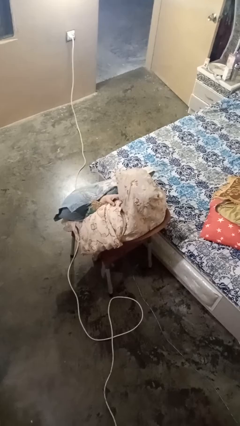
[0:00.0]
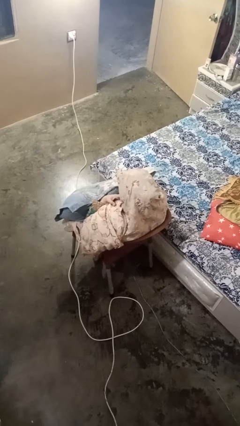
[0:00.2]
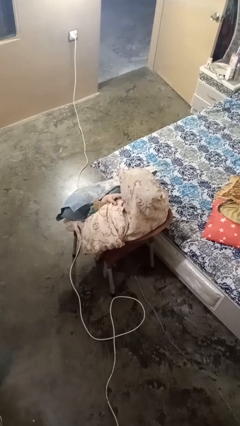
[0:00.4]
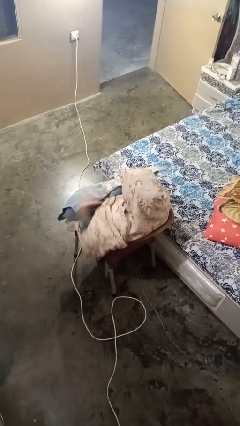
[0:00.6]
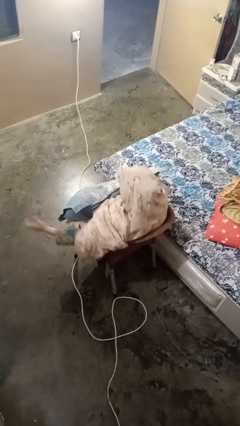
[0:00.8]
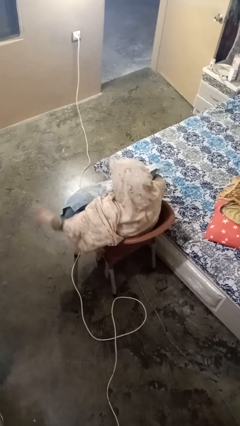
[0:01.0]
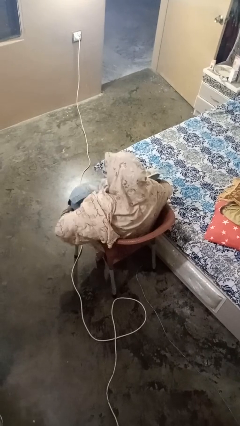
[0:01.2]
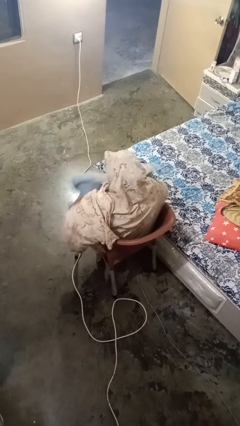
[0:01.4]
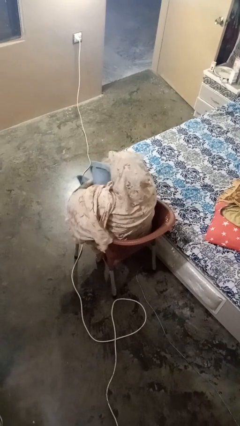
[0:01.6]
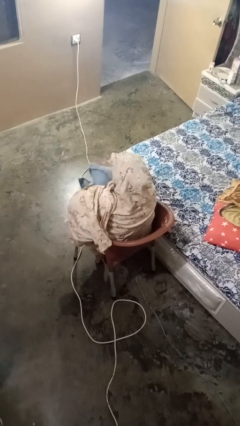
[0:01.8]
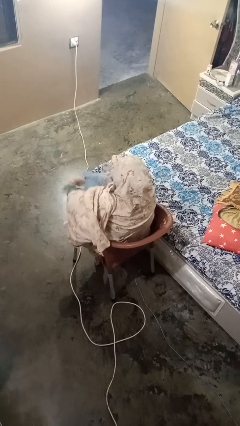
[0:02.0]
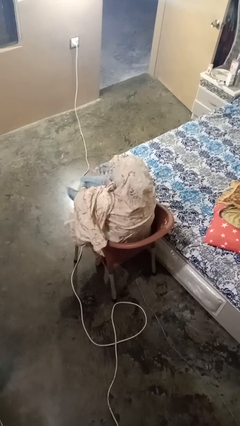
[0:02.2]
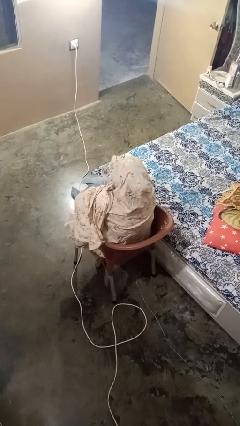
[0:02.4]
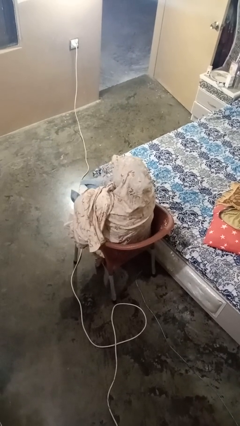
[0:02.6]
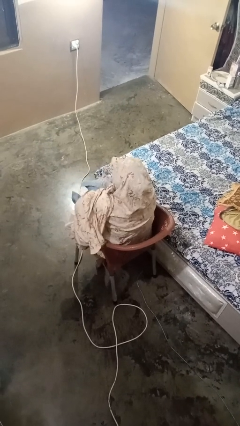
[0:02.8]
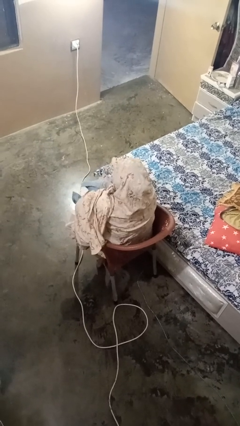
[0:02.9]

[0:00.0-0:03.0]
person squeezes object

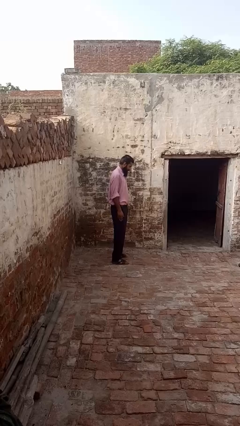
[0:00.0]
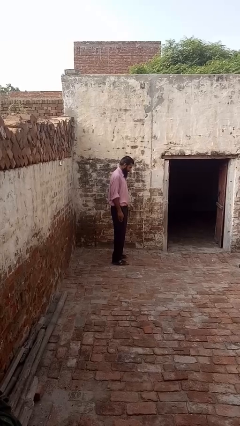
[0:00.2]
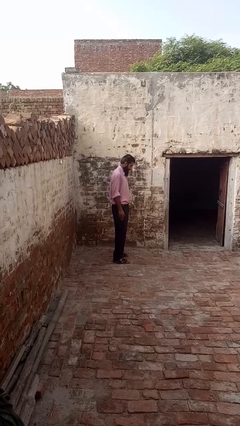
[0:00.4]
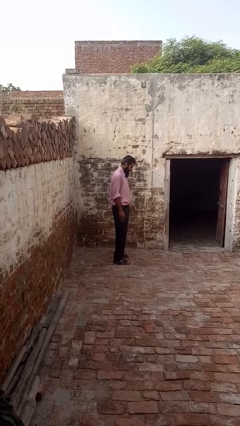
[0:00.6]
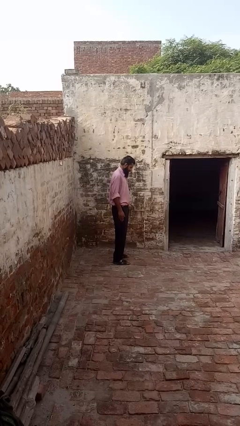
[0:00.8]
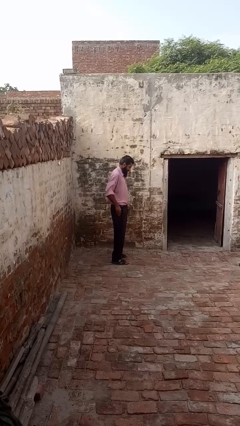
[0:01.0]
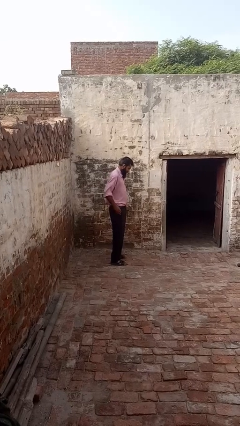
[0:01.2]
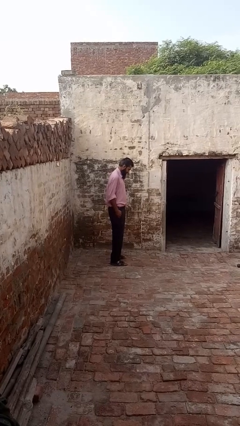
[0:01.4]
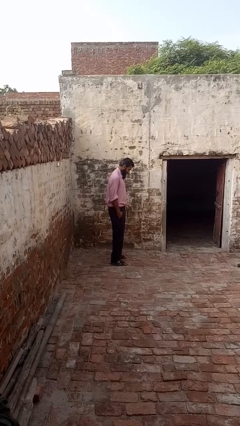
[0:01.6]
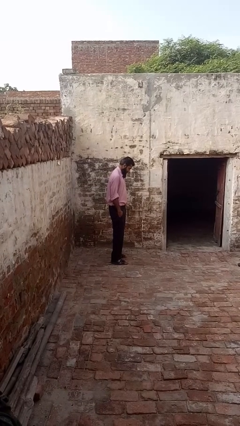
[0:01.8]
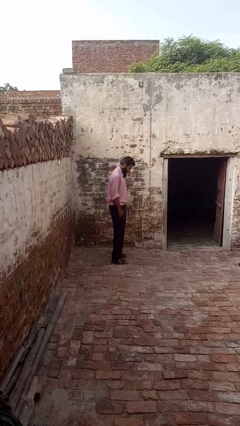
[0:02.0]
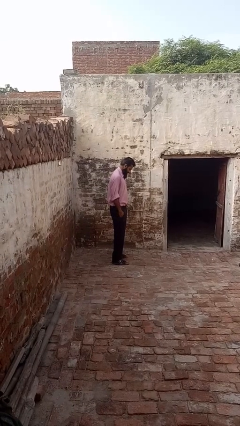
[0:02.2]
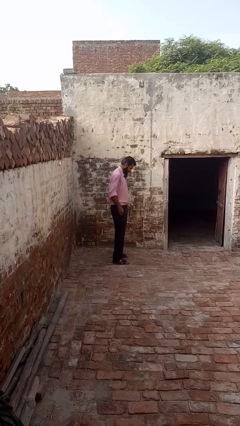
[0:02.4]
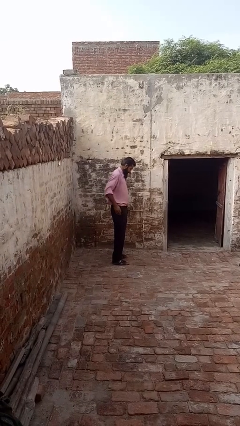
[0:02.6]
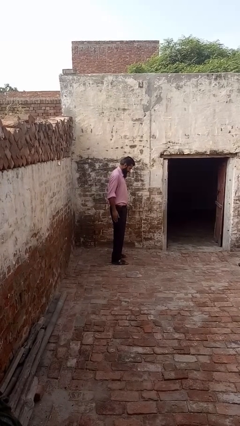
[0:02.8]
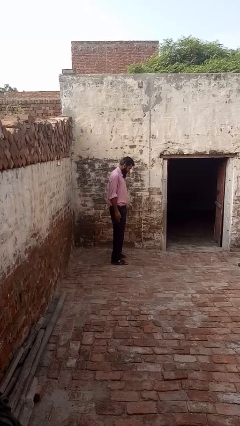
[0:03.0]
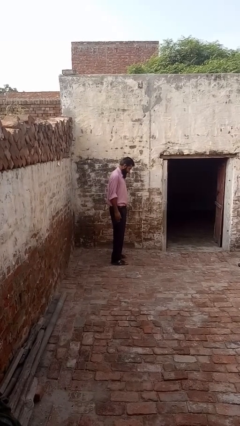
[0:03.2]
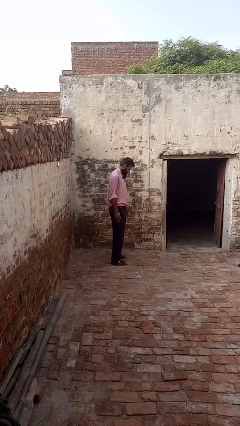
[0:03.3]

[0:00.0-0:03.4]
person puts hands in back pockets

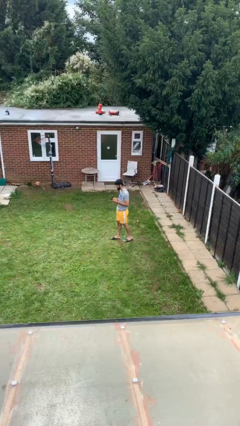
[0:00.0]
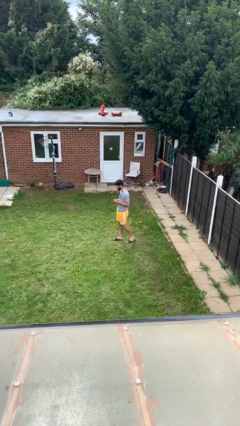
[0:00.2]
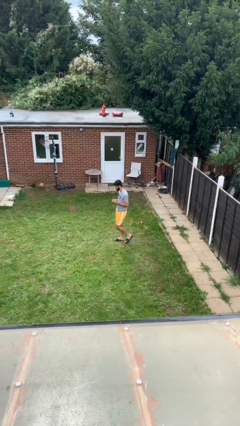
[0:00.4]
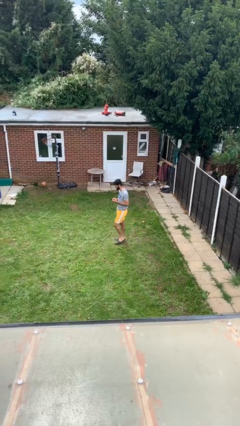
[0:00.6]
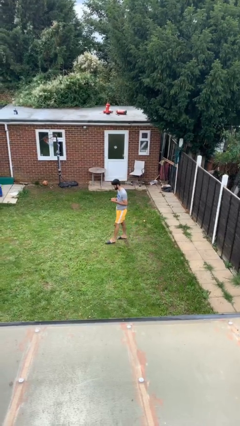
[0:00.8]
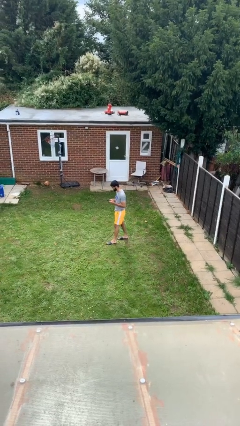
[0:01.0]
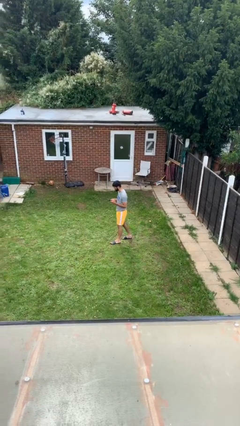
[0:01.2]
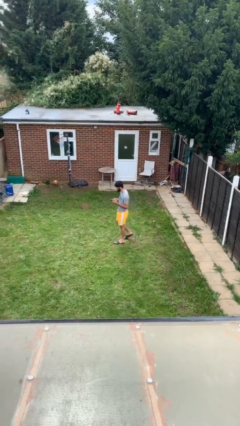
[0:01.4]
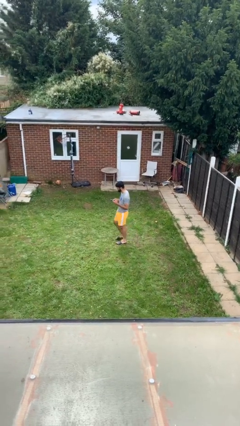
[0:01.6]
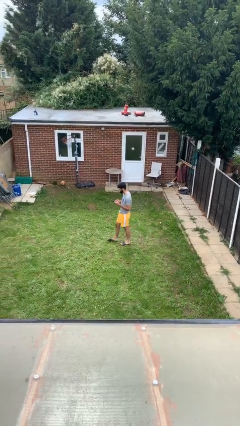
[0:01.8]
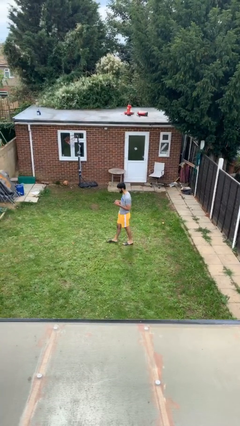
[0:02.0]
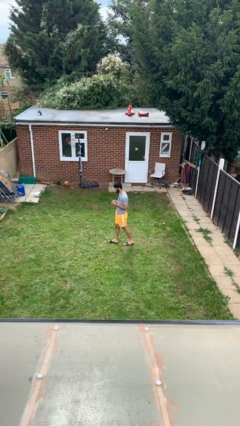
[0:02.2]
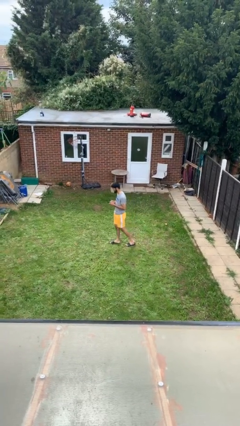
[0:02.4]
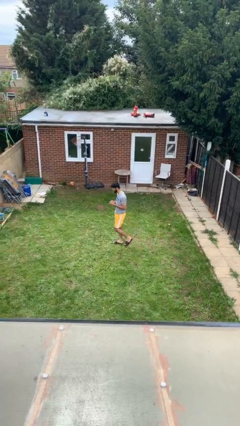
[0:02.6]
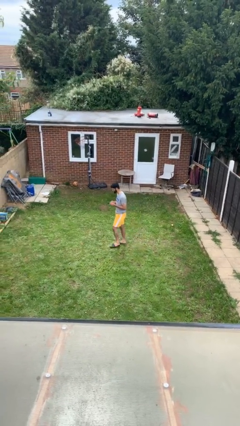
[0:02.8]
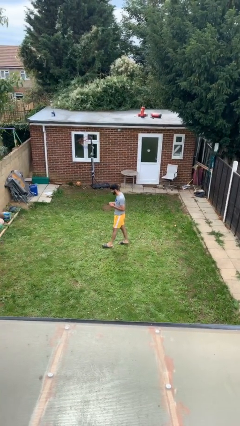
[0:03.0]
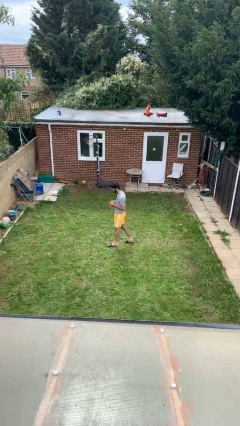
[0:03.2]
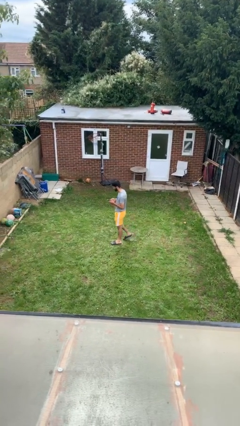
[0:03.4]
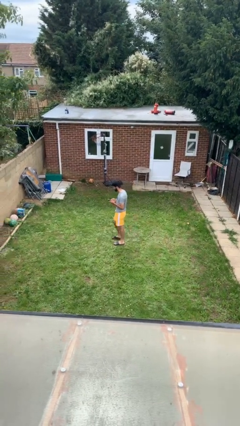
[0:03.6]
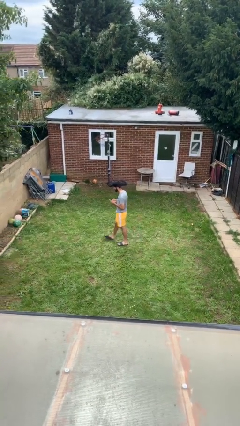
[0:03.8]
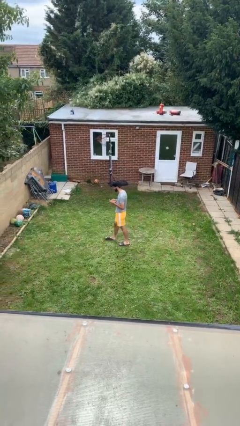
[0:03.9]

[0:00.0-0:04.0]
person texts on phone

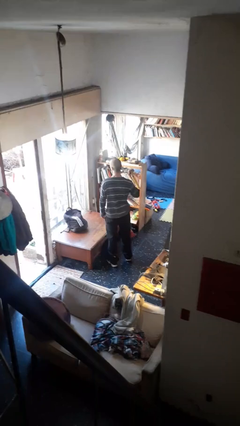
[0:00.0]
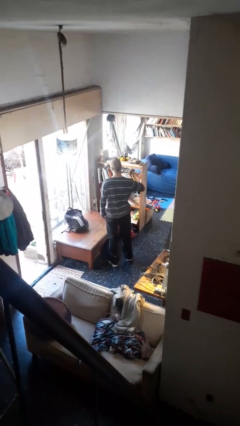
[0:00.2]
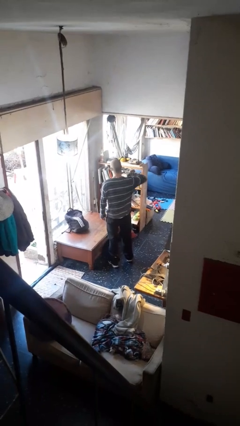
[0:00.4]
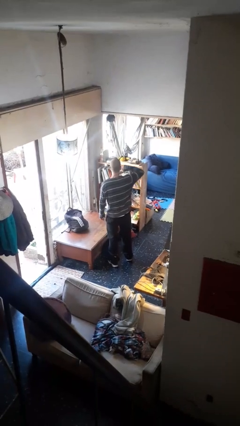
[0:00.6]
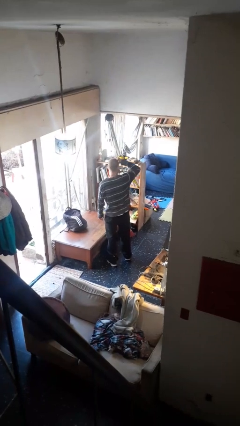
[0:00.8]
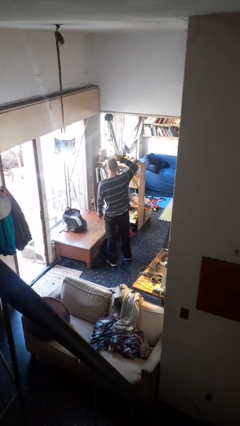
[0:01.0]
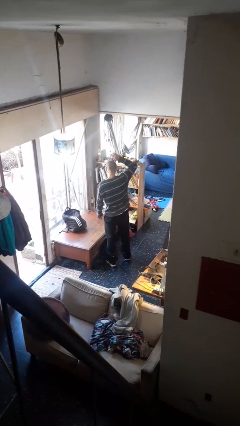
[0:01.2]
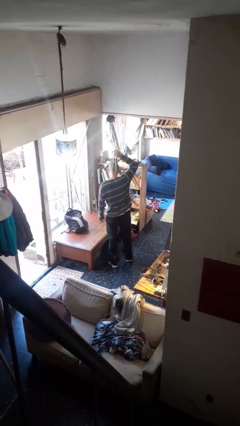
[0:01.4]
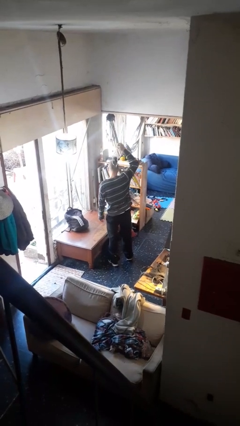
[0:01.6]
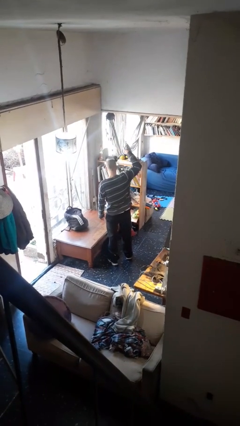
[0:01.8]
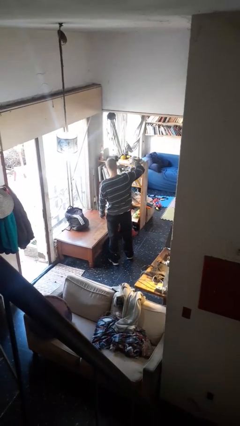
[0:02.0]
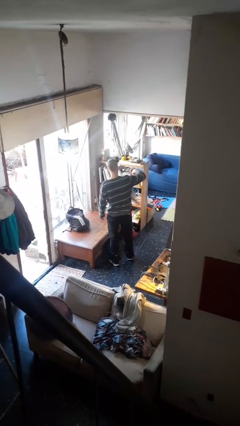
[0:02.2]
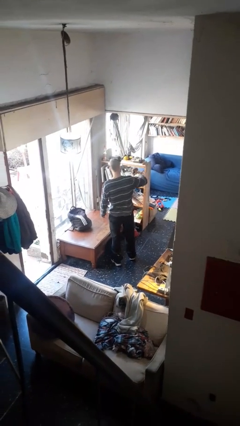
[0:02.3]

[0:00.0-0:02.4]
person takes off necklace

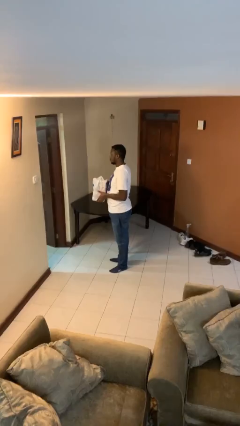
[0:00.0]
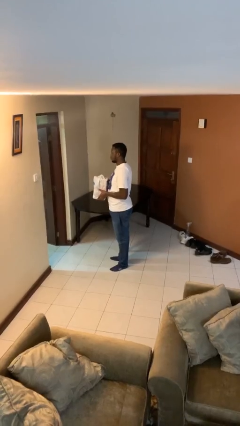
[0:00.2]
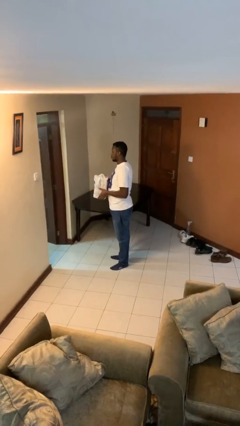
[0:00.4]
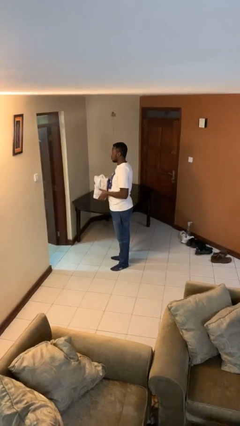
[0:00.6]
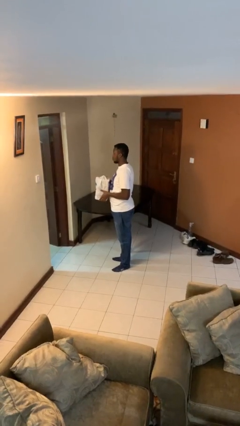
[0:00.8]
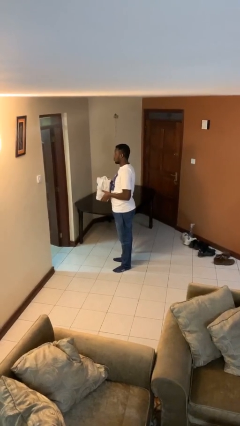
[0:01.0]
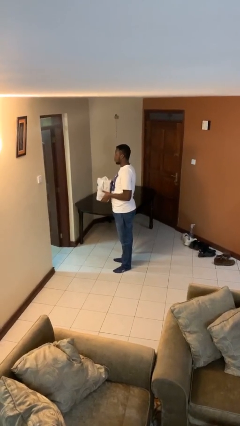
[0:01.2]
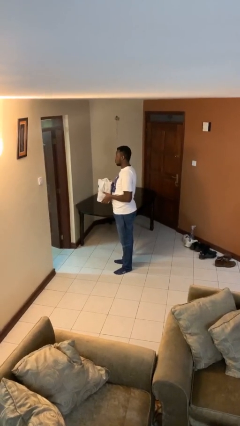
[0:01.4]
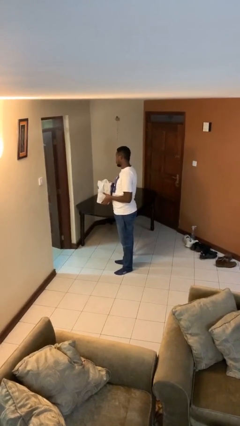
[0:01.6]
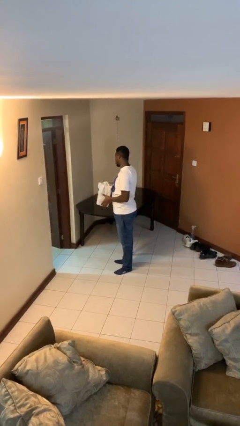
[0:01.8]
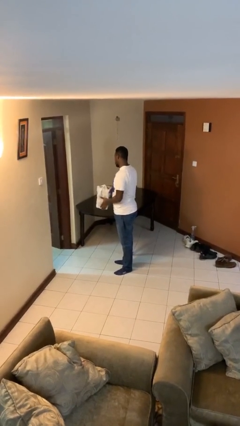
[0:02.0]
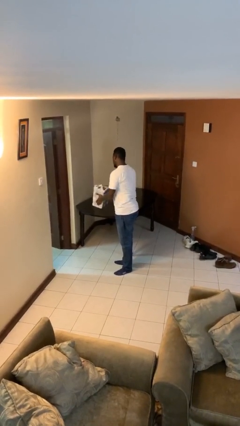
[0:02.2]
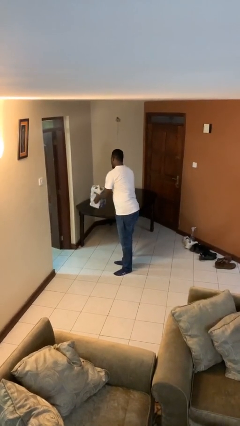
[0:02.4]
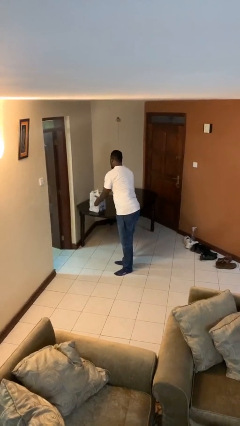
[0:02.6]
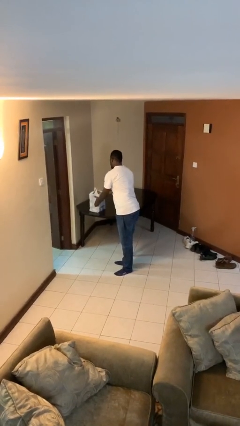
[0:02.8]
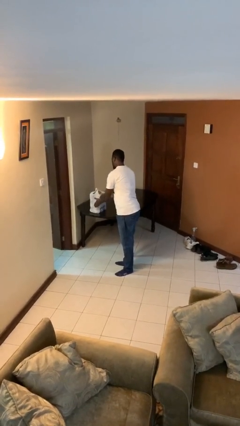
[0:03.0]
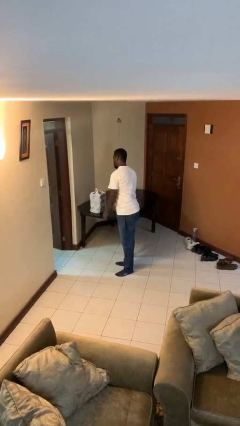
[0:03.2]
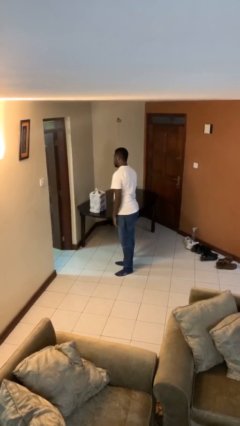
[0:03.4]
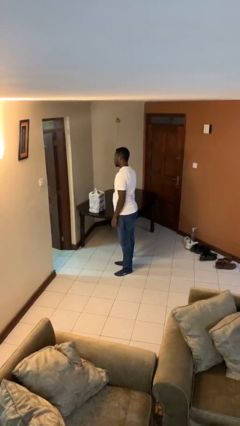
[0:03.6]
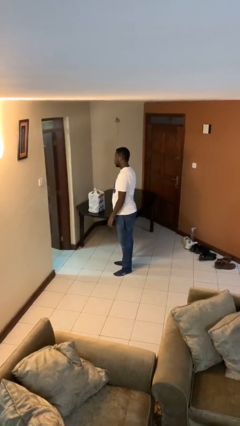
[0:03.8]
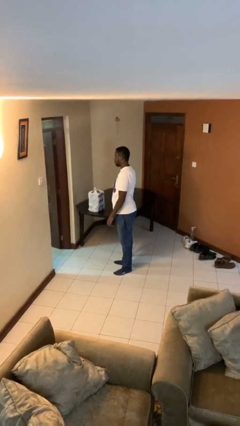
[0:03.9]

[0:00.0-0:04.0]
person puts down object on table

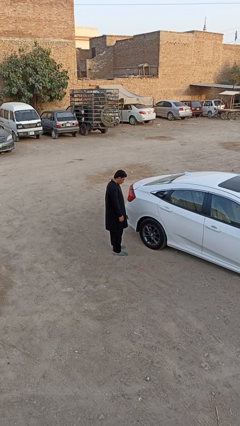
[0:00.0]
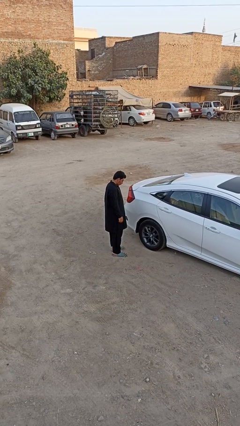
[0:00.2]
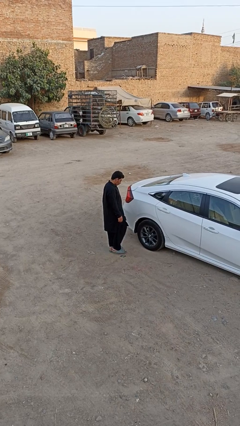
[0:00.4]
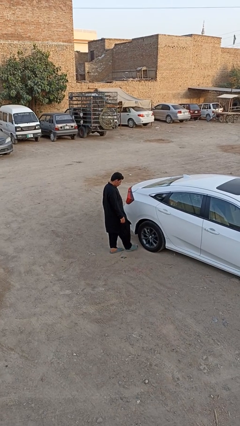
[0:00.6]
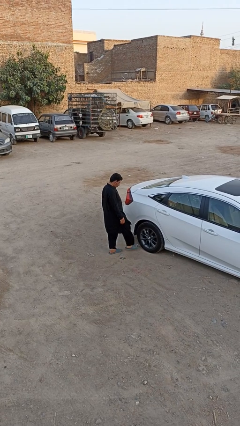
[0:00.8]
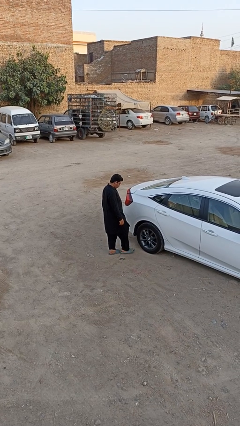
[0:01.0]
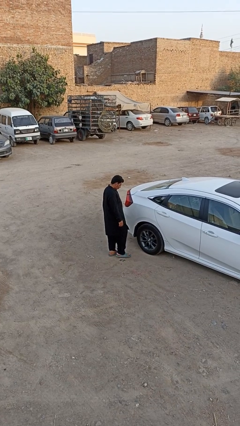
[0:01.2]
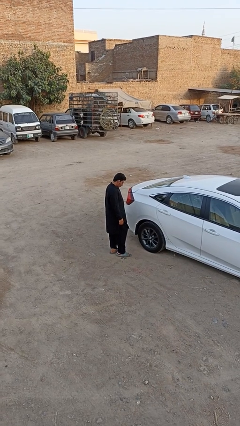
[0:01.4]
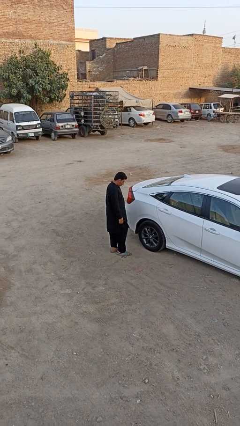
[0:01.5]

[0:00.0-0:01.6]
person kicks car tires
